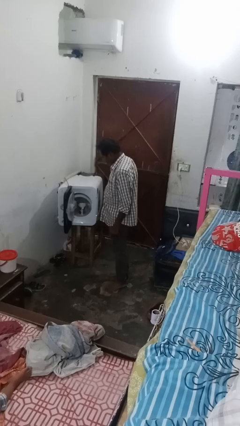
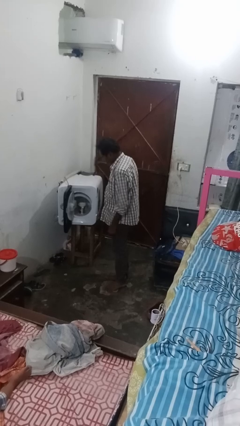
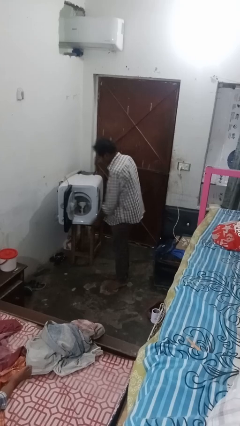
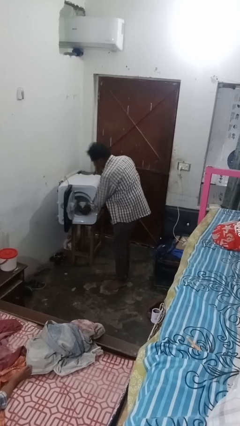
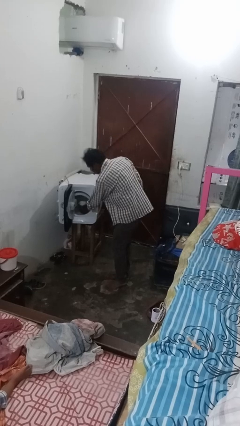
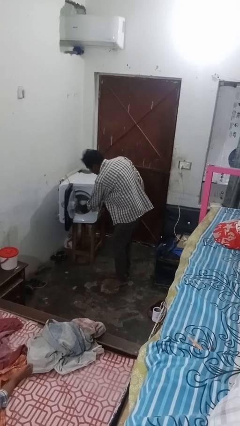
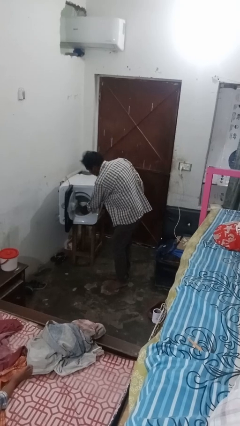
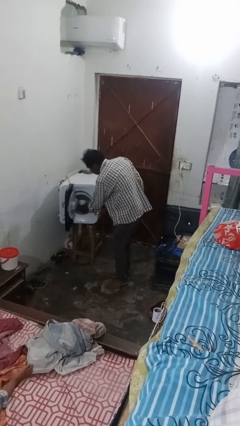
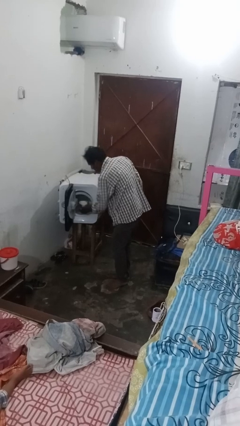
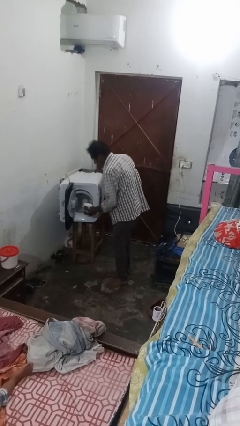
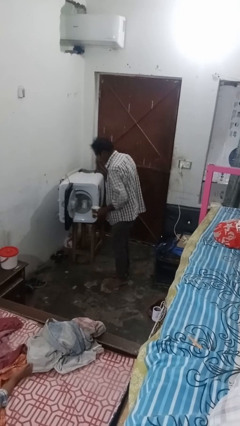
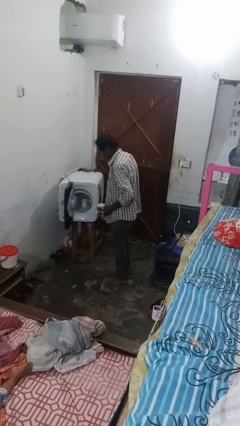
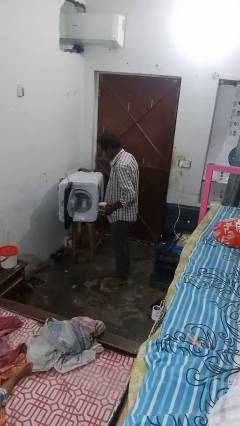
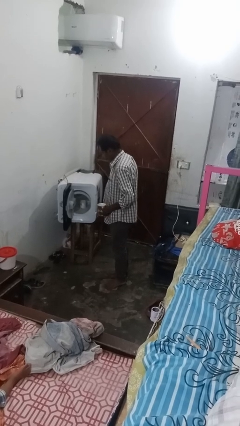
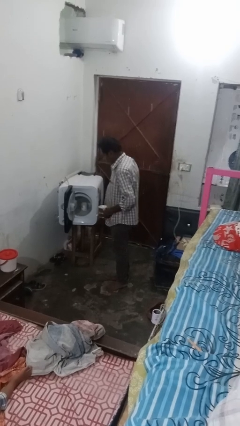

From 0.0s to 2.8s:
person unloads dishwasher

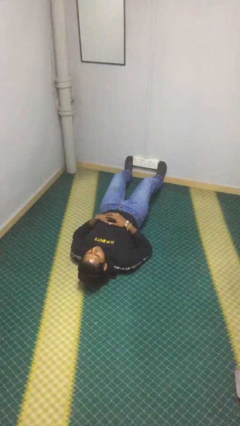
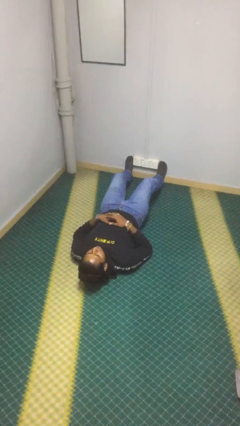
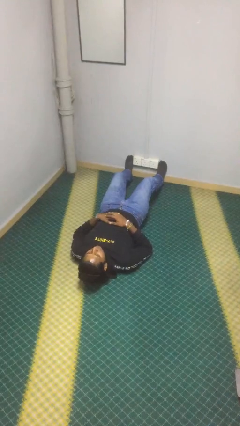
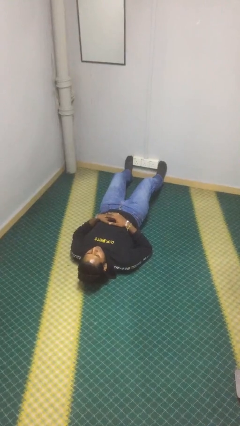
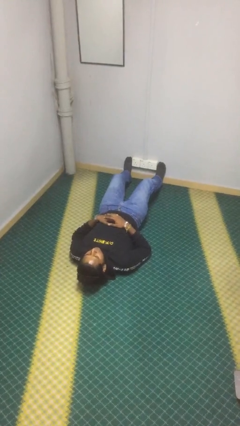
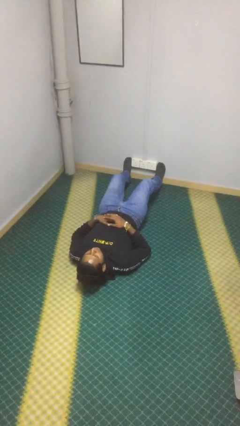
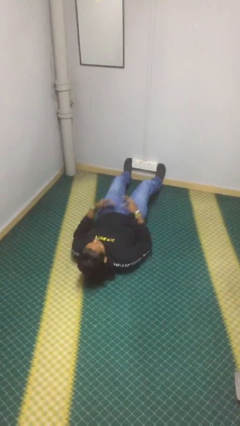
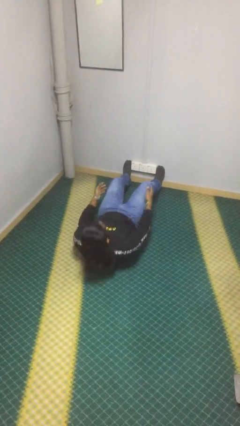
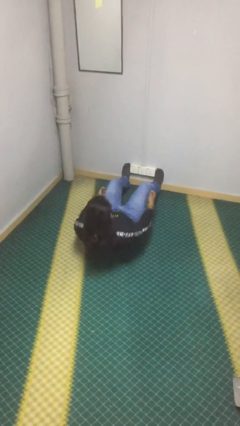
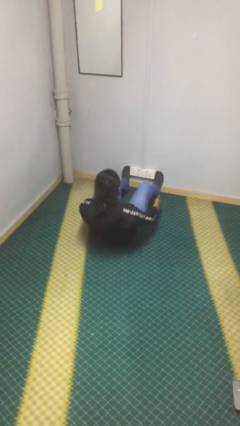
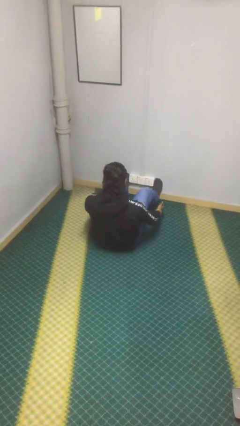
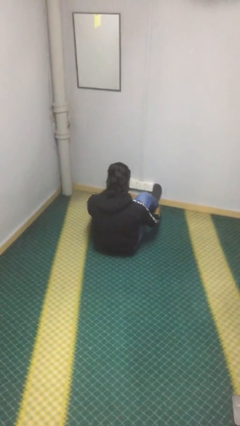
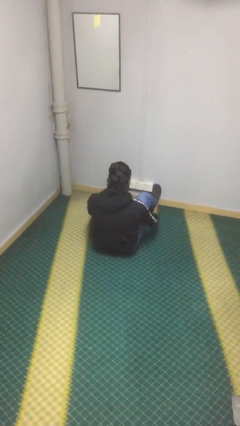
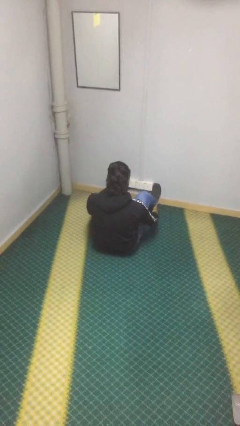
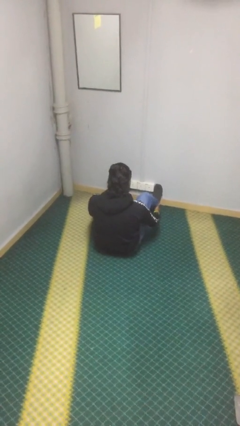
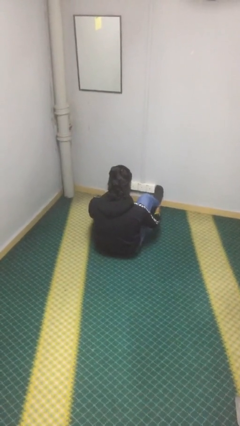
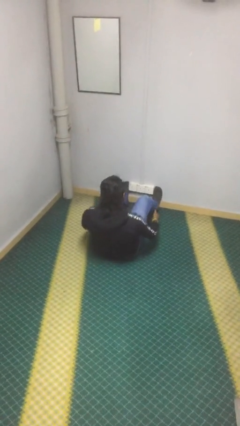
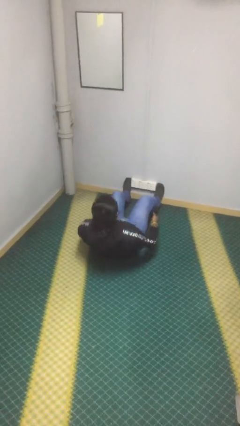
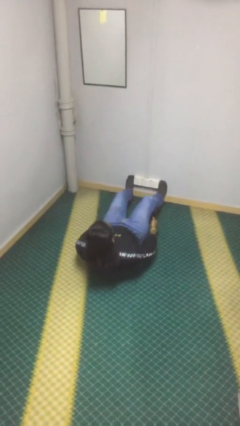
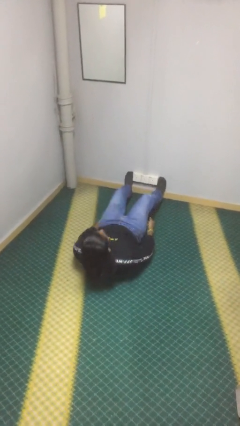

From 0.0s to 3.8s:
person exercises with situp

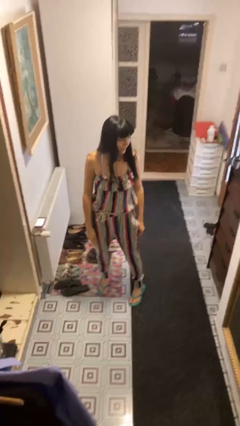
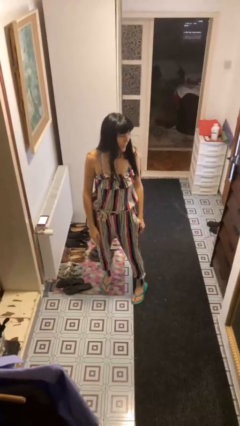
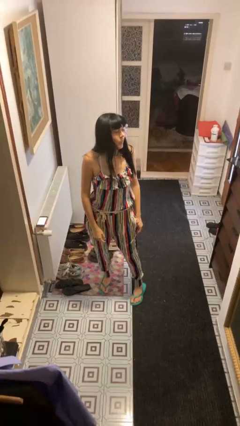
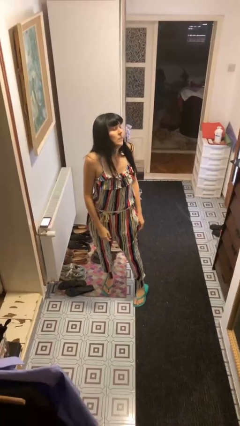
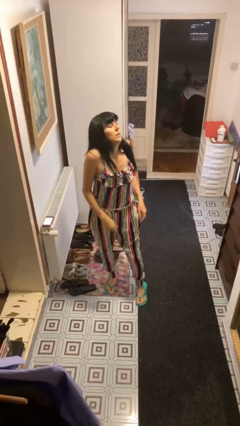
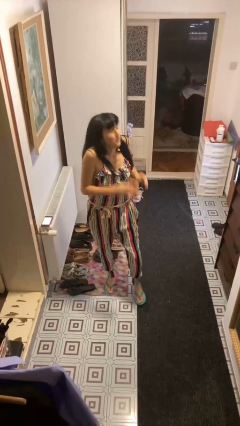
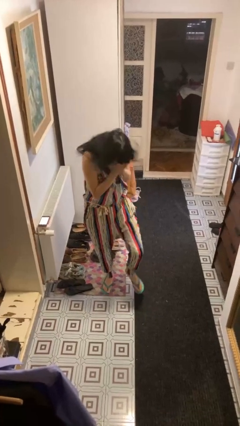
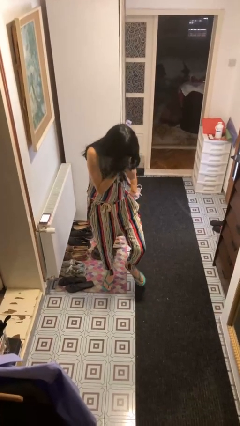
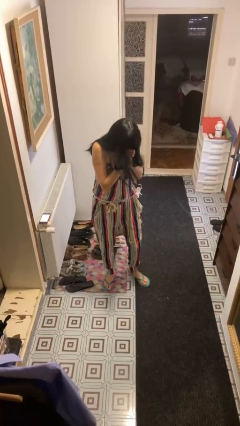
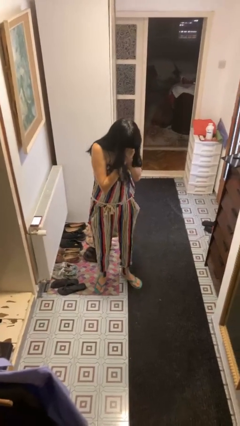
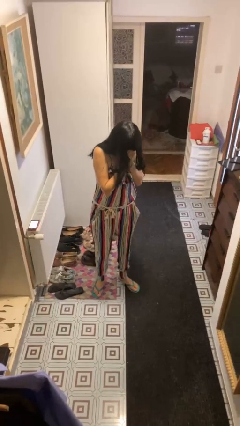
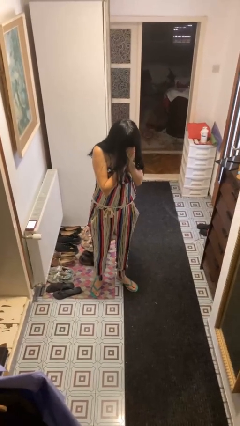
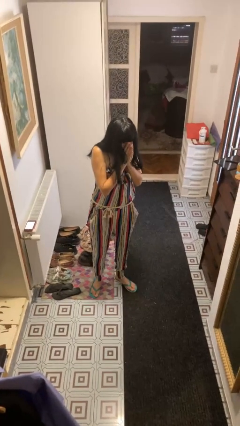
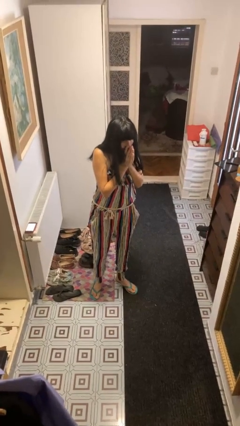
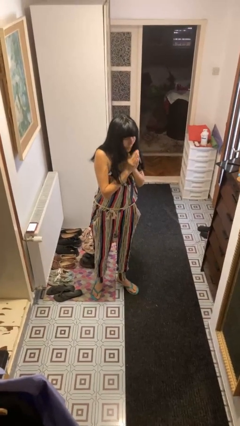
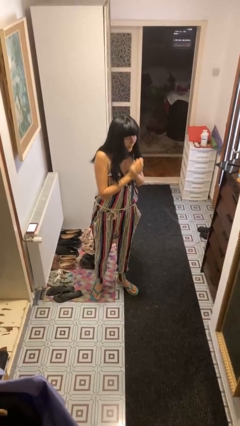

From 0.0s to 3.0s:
person sneezes into hand

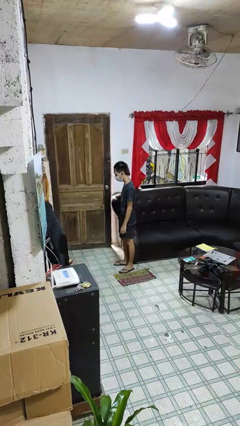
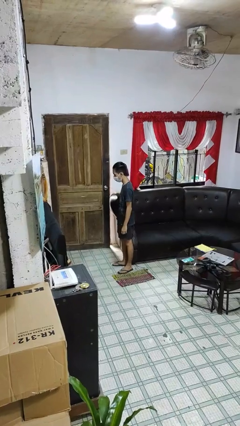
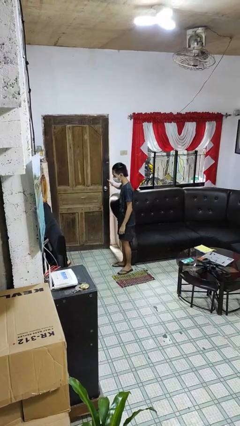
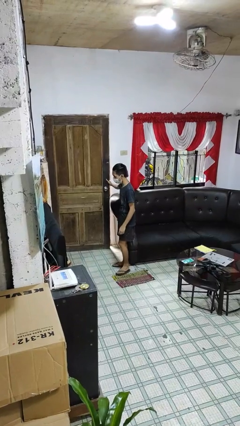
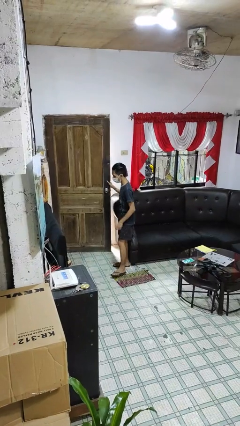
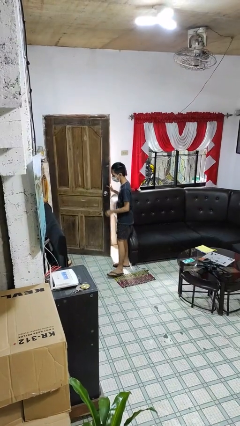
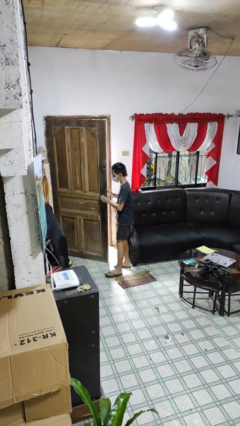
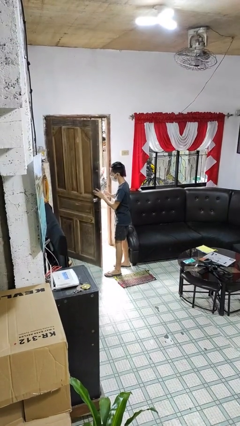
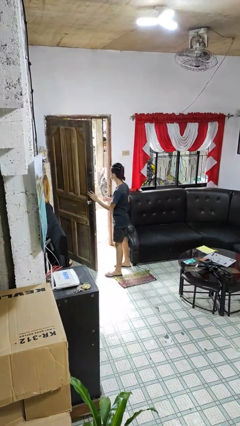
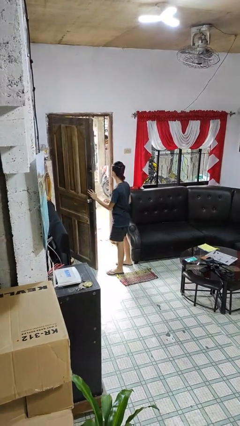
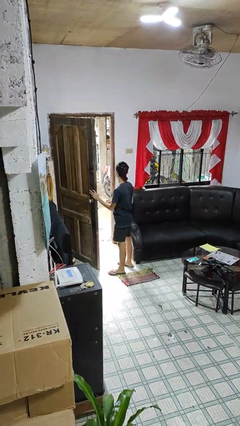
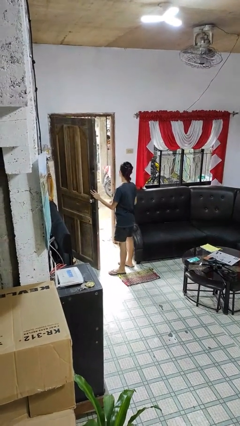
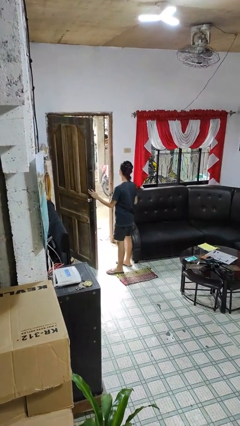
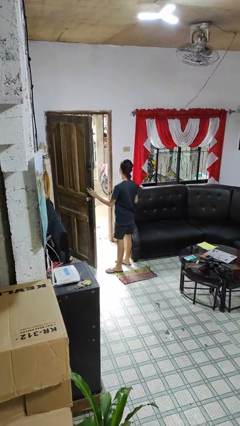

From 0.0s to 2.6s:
person opens facility door

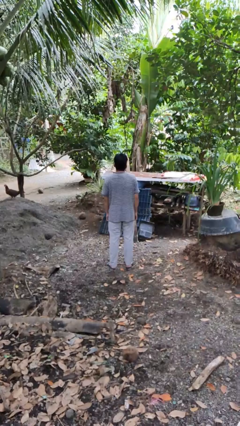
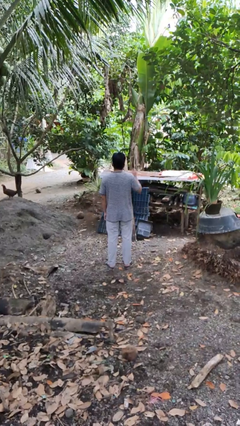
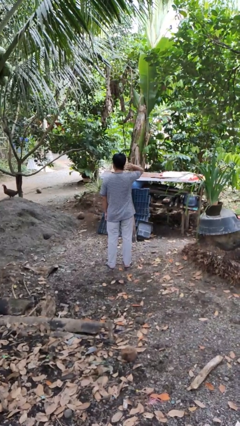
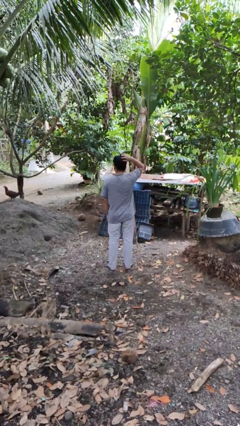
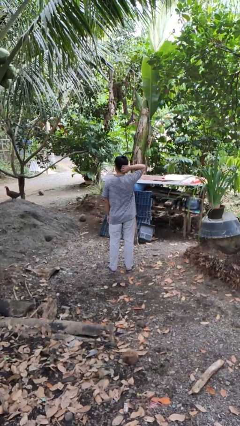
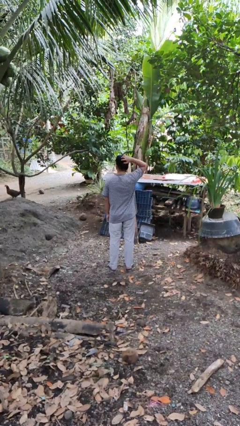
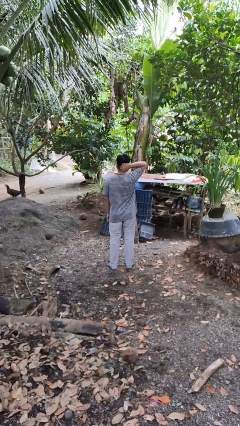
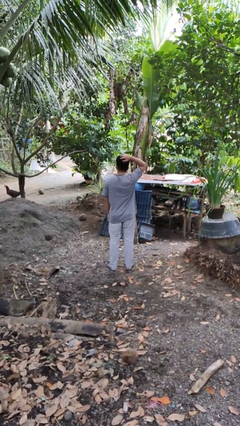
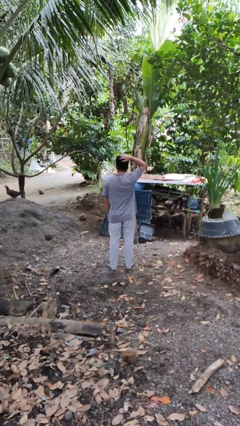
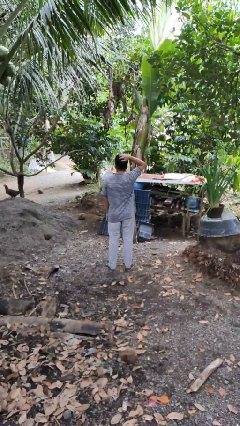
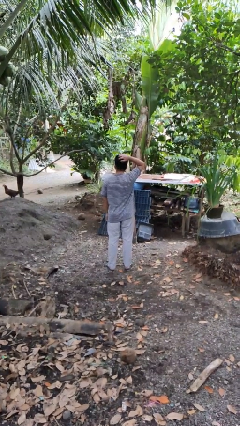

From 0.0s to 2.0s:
person scratches face

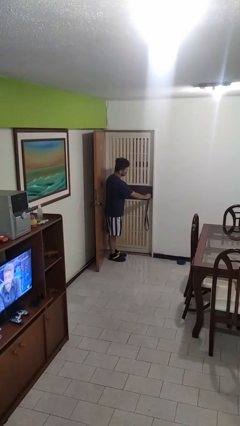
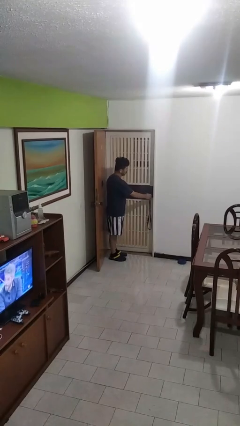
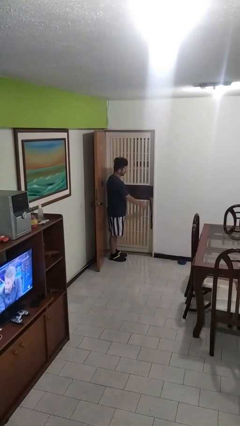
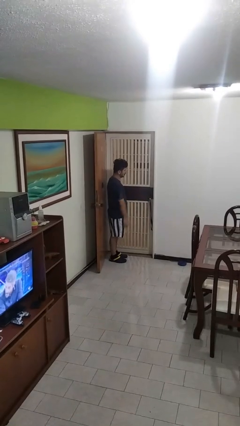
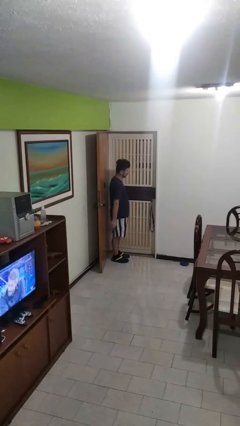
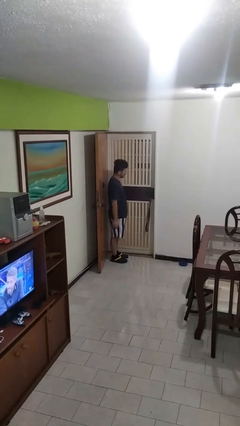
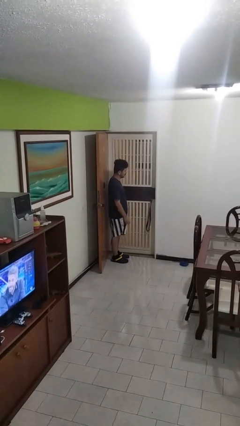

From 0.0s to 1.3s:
person unlocks door with keys

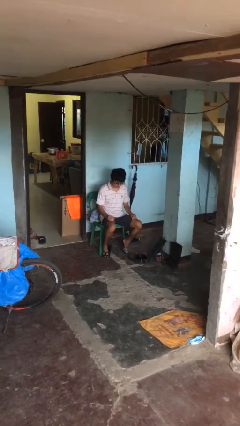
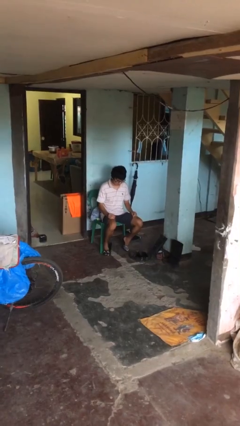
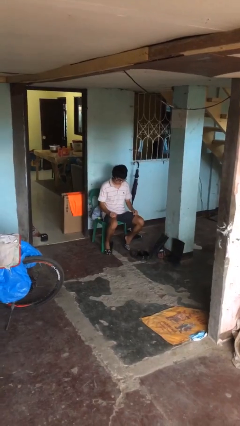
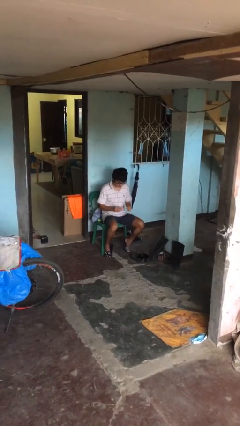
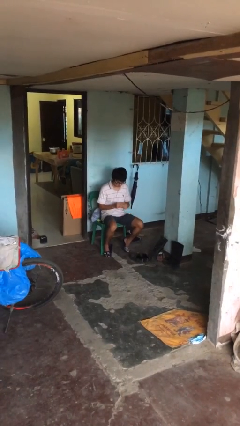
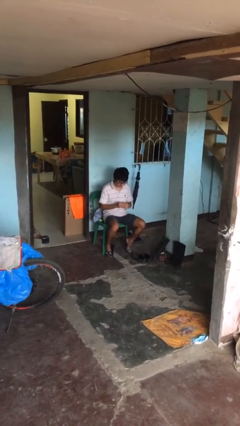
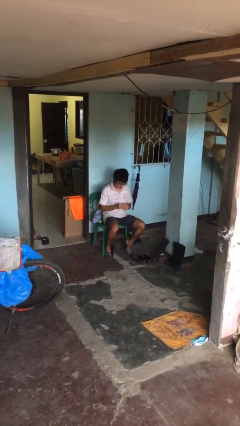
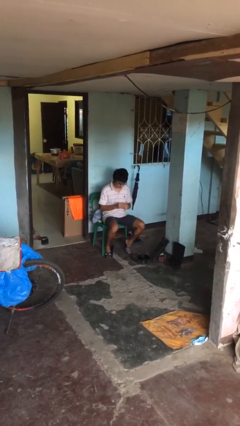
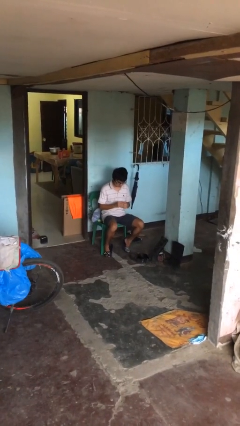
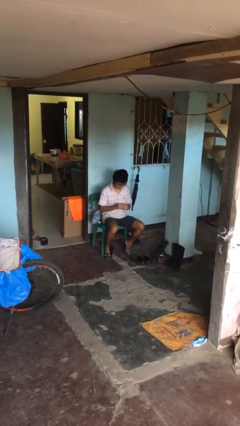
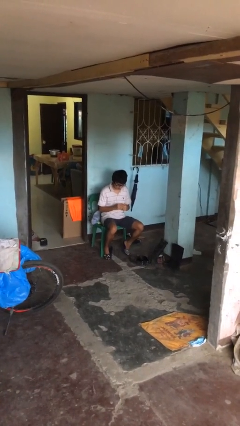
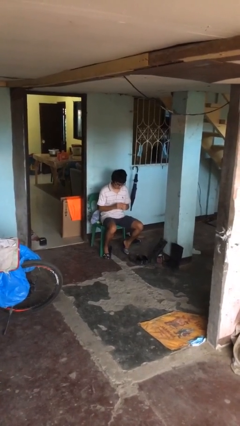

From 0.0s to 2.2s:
person puts on ring
